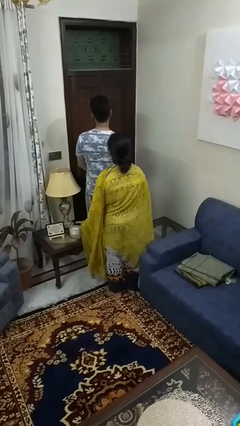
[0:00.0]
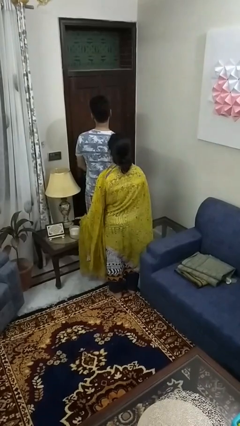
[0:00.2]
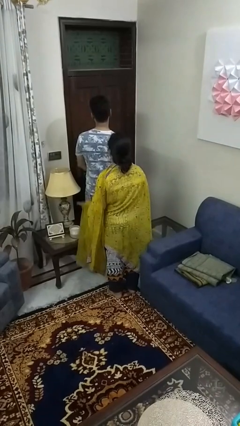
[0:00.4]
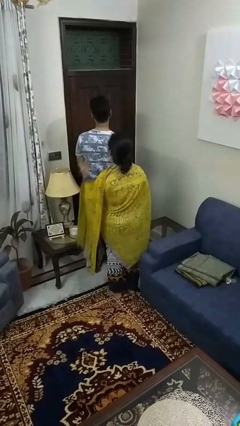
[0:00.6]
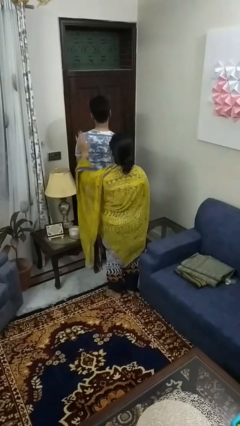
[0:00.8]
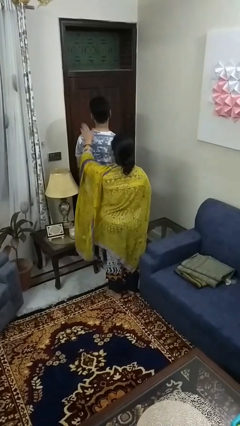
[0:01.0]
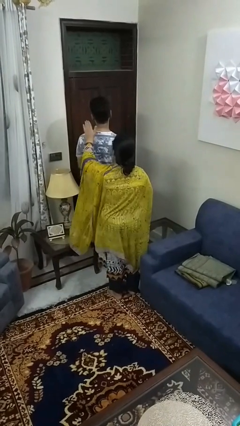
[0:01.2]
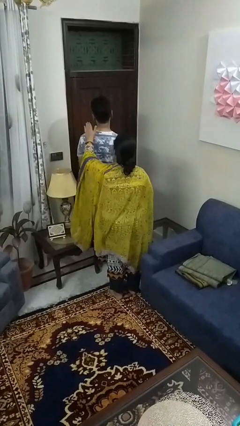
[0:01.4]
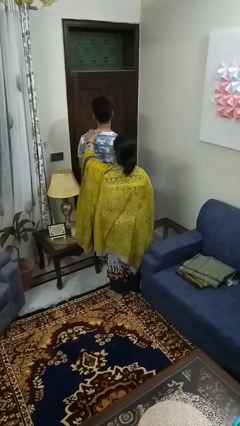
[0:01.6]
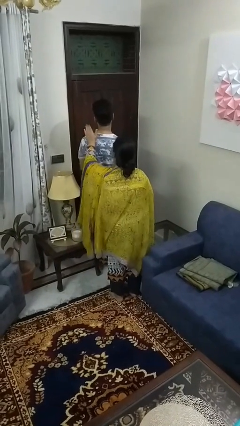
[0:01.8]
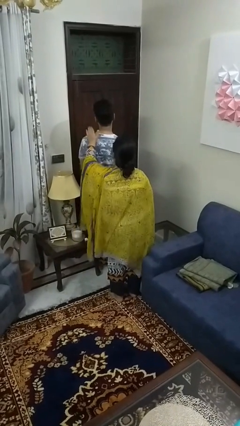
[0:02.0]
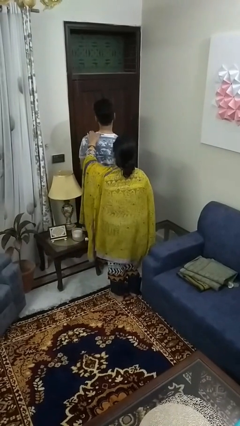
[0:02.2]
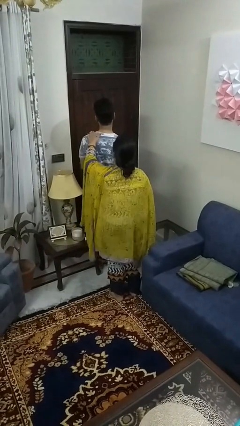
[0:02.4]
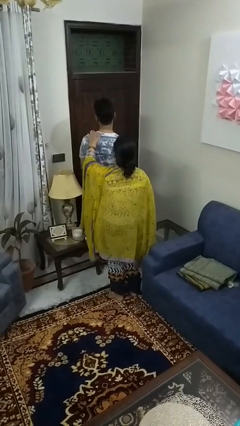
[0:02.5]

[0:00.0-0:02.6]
person pounds shoulders of person

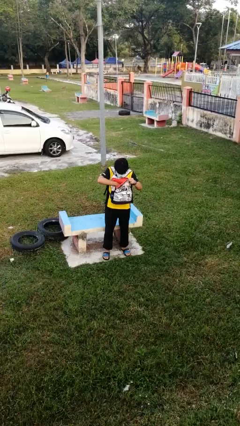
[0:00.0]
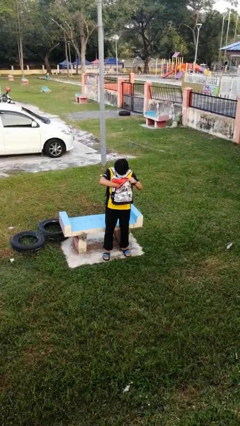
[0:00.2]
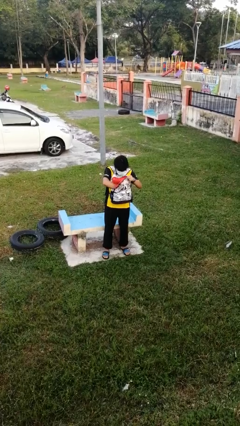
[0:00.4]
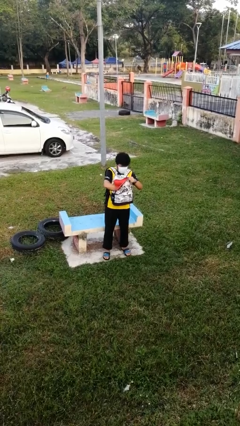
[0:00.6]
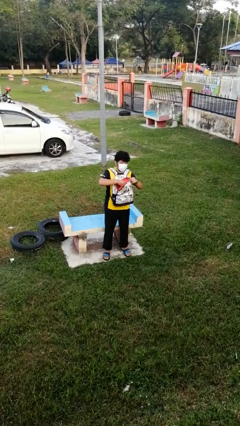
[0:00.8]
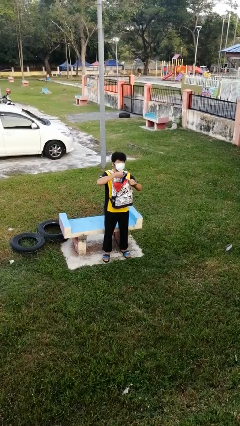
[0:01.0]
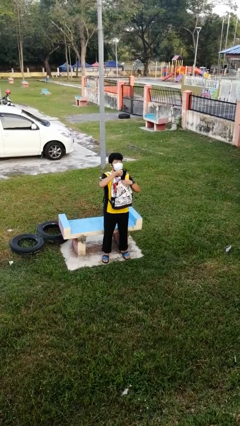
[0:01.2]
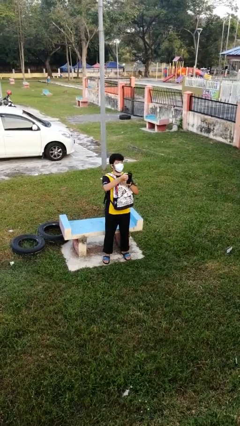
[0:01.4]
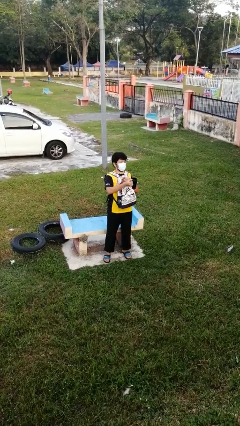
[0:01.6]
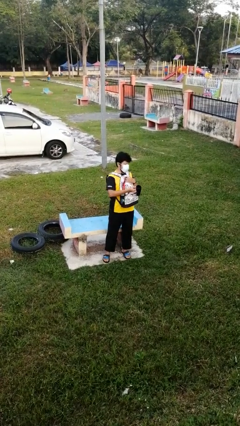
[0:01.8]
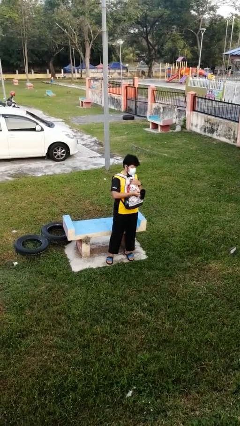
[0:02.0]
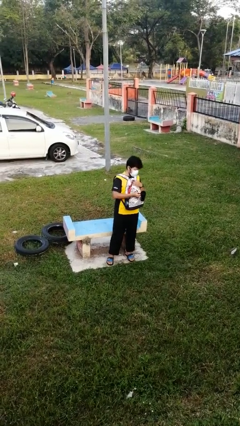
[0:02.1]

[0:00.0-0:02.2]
person takes object from backpack

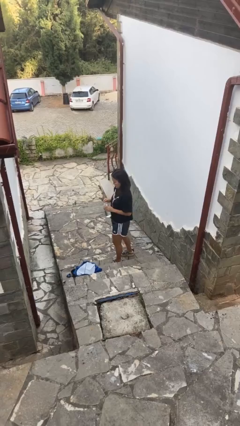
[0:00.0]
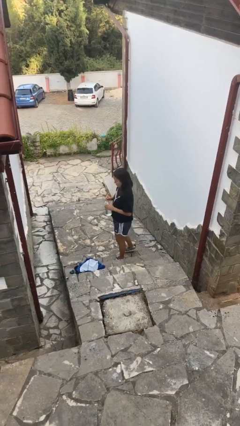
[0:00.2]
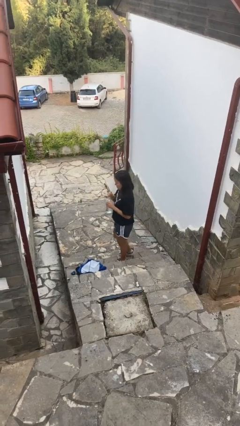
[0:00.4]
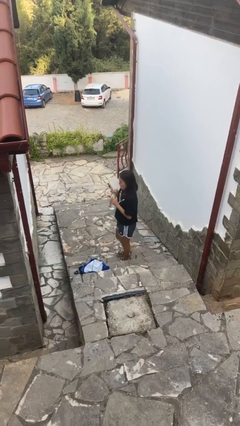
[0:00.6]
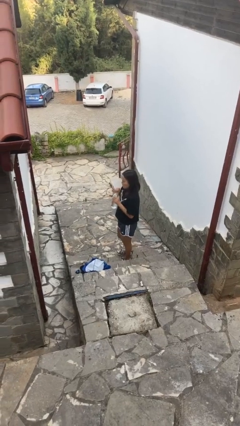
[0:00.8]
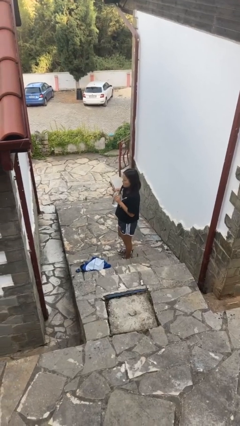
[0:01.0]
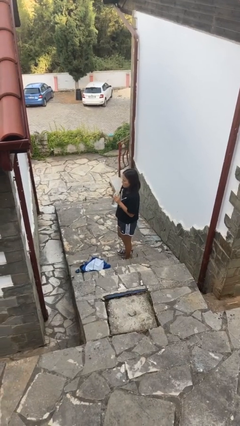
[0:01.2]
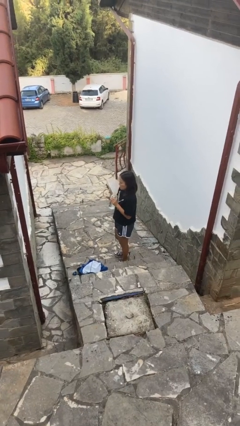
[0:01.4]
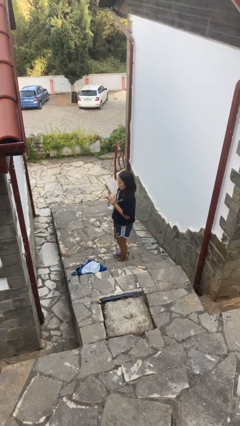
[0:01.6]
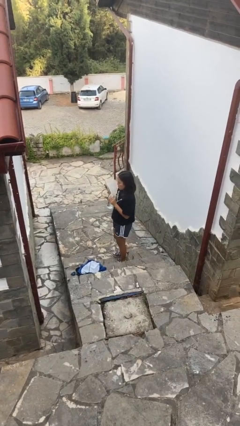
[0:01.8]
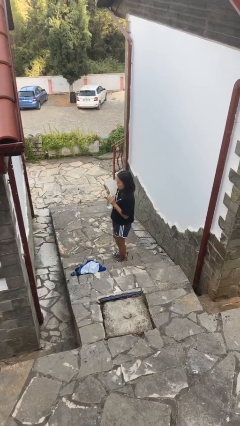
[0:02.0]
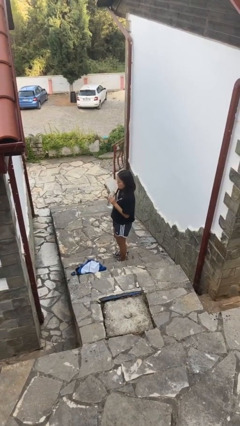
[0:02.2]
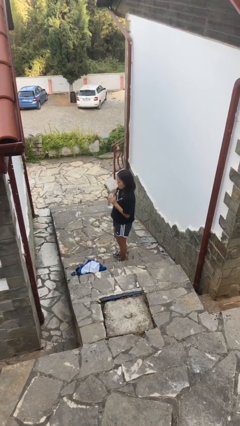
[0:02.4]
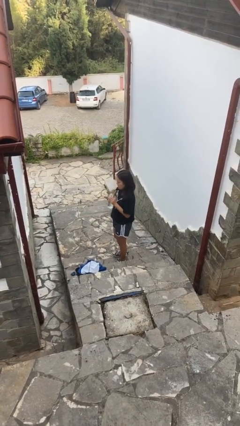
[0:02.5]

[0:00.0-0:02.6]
person drinks from straw

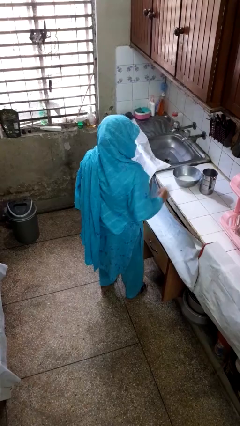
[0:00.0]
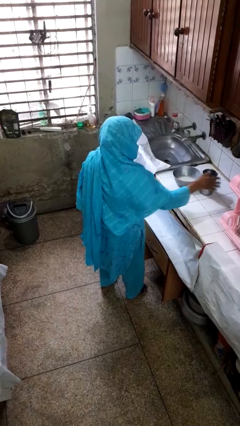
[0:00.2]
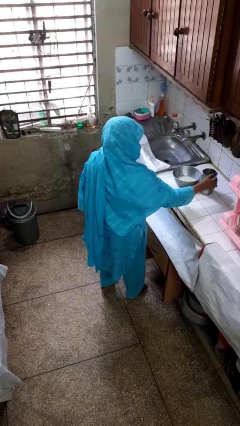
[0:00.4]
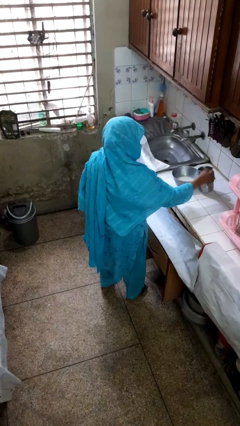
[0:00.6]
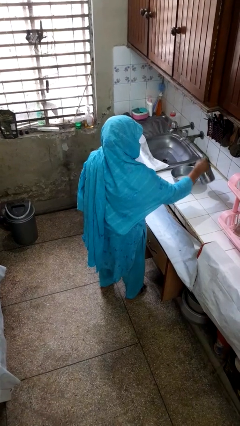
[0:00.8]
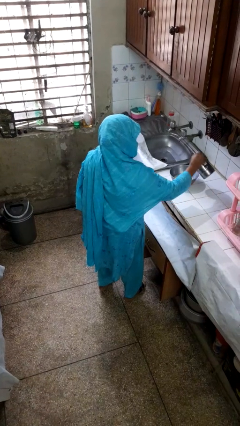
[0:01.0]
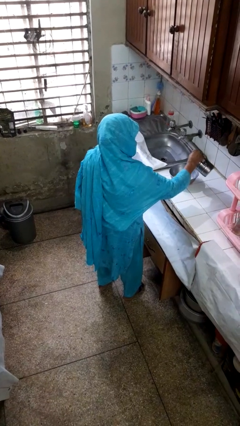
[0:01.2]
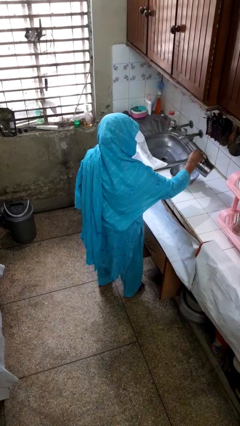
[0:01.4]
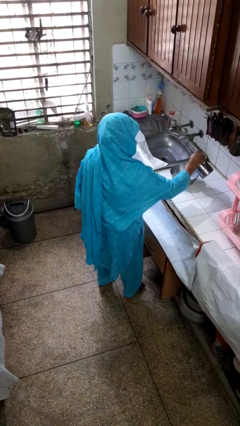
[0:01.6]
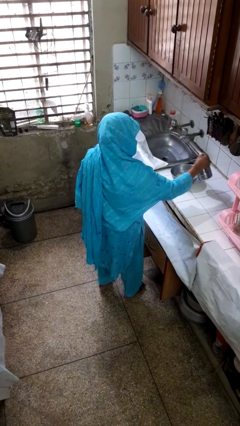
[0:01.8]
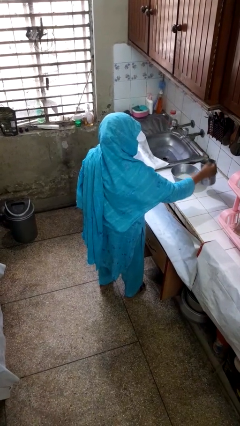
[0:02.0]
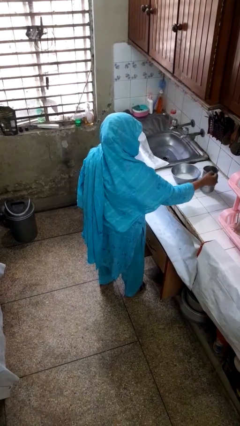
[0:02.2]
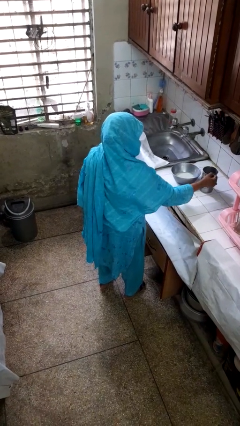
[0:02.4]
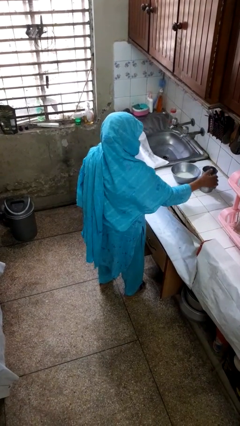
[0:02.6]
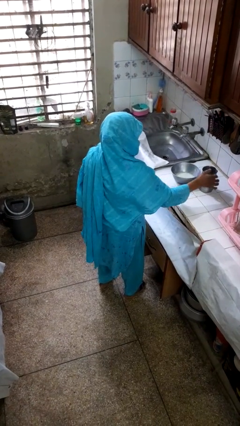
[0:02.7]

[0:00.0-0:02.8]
person pours into bowl

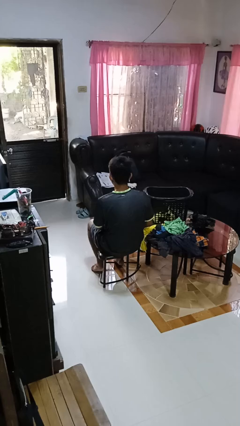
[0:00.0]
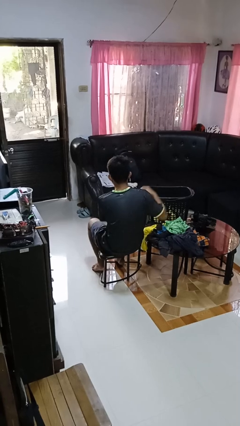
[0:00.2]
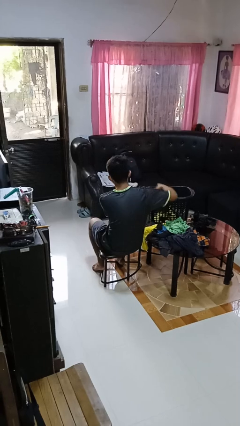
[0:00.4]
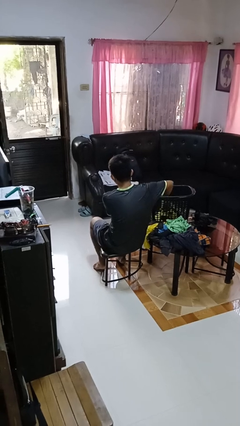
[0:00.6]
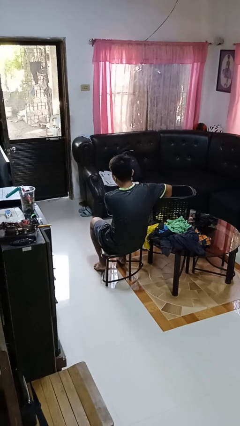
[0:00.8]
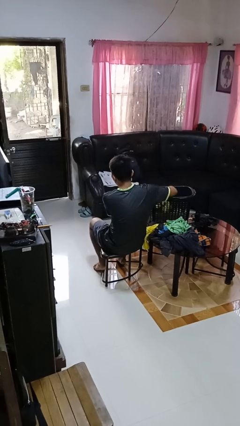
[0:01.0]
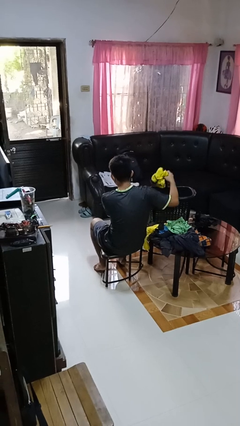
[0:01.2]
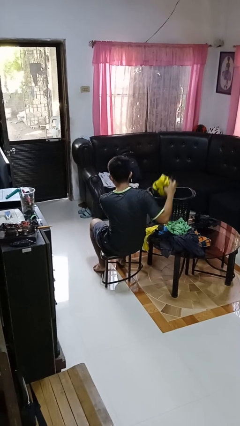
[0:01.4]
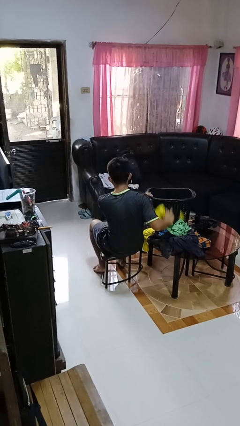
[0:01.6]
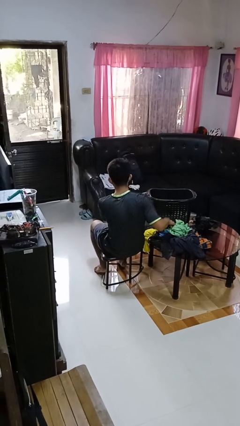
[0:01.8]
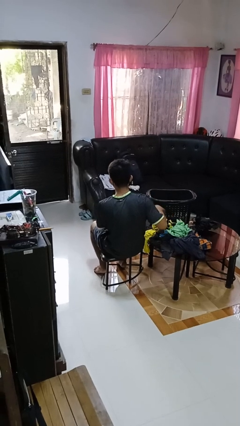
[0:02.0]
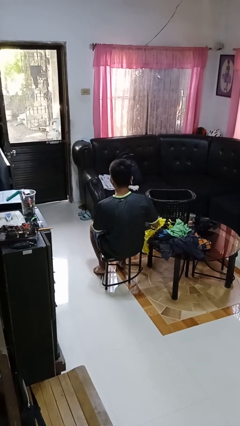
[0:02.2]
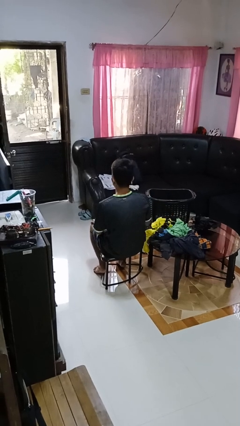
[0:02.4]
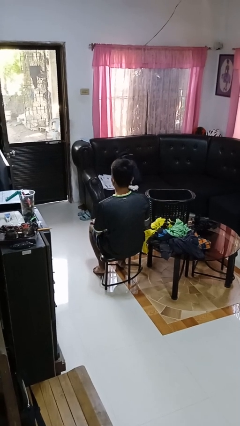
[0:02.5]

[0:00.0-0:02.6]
person takes object from basket

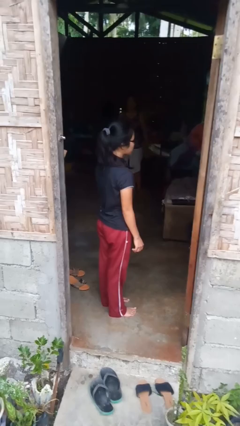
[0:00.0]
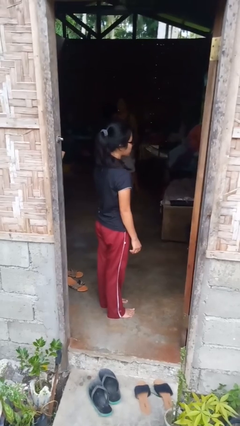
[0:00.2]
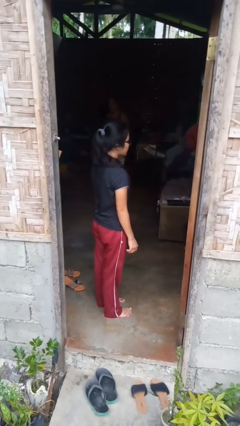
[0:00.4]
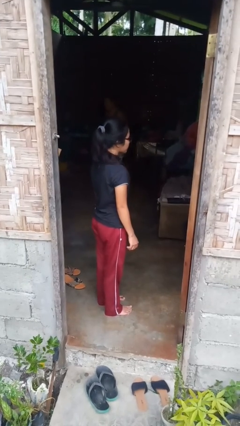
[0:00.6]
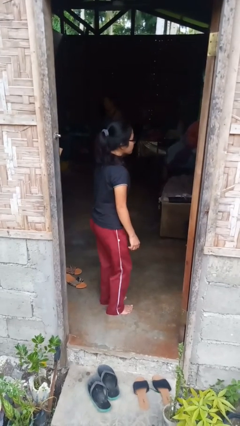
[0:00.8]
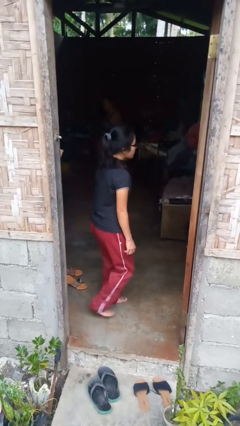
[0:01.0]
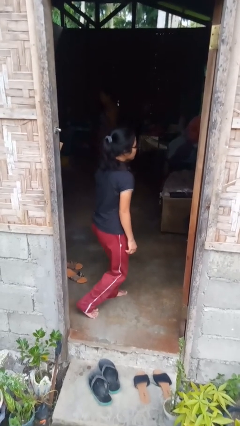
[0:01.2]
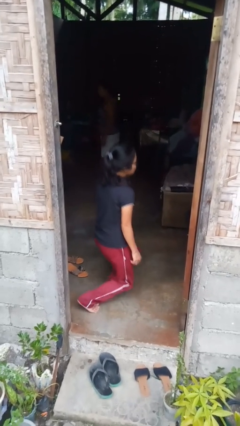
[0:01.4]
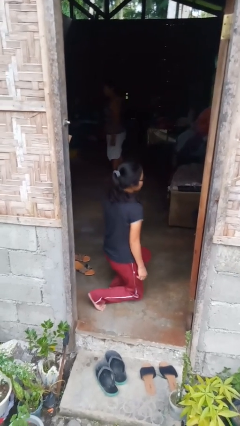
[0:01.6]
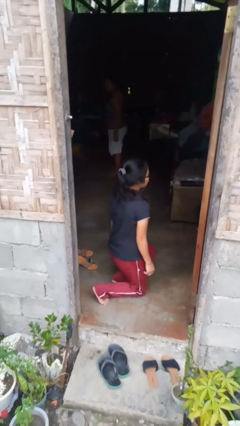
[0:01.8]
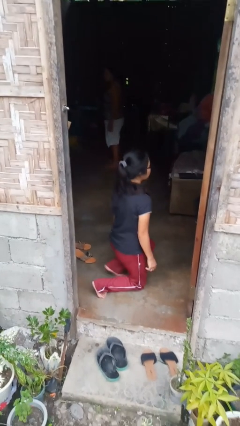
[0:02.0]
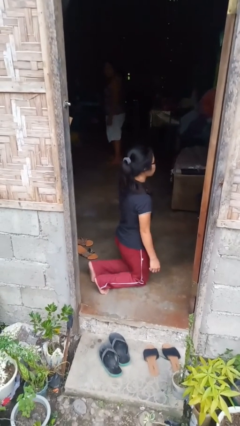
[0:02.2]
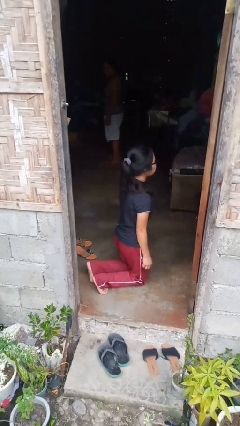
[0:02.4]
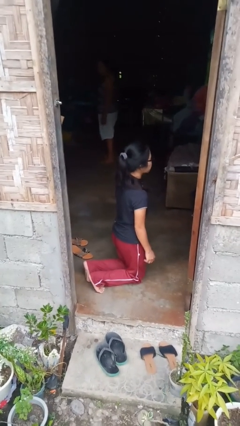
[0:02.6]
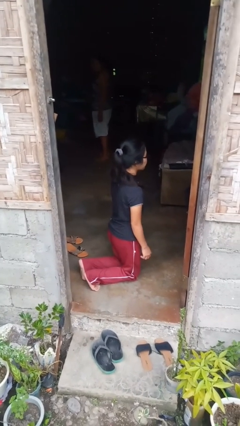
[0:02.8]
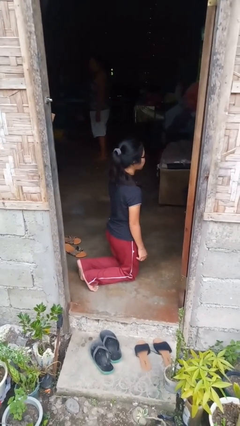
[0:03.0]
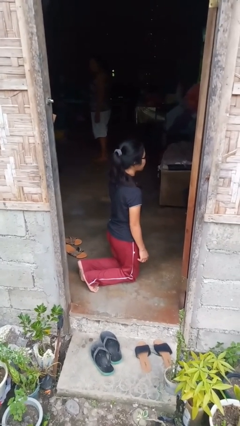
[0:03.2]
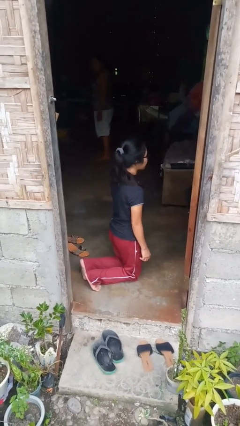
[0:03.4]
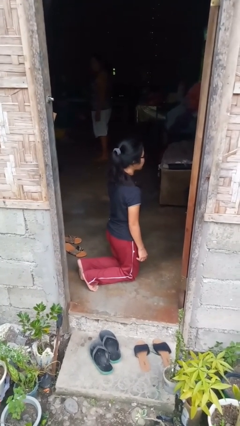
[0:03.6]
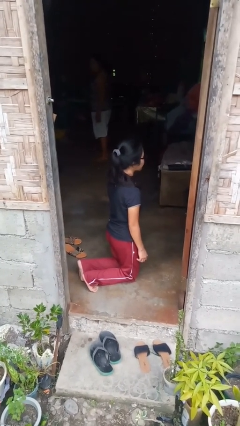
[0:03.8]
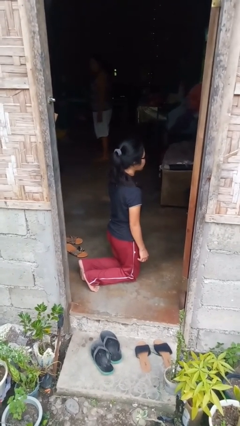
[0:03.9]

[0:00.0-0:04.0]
person kneels

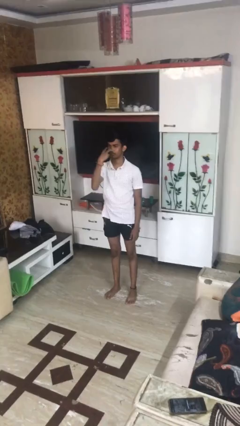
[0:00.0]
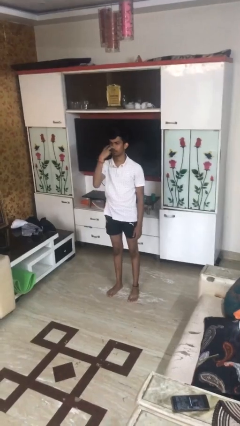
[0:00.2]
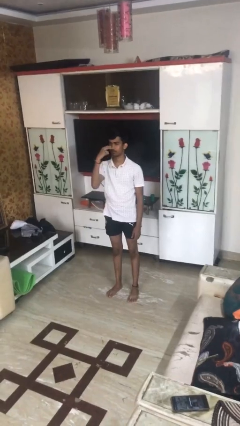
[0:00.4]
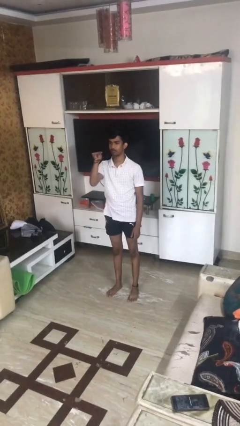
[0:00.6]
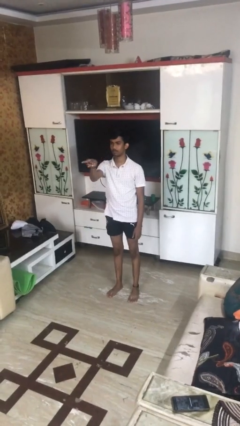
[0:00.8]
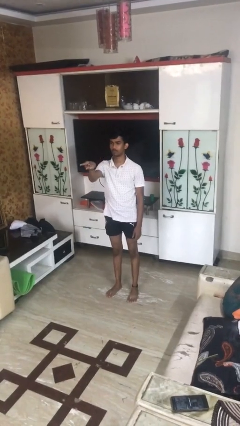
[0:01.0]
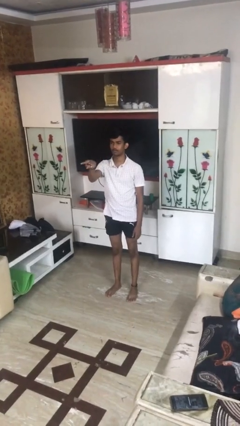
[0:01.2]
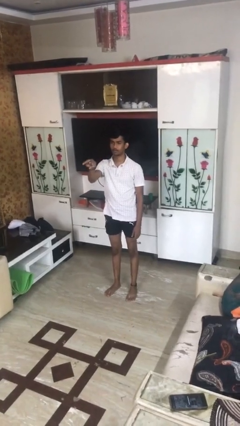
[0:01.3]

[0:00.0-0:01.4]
person gestures watch closely
